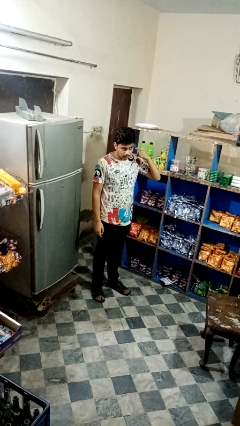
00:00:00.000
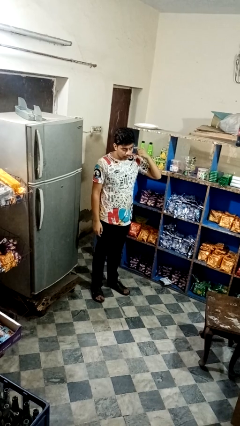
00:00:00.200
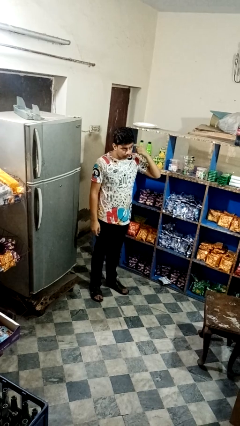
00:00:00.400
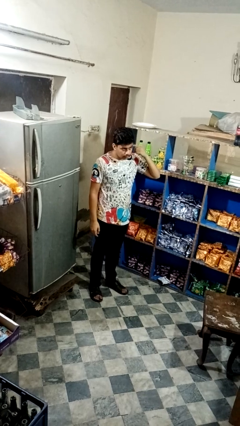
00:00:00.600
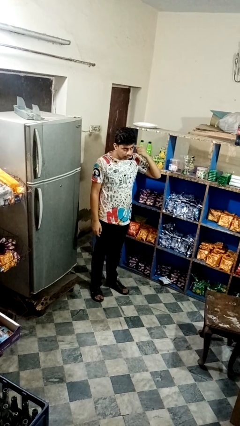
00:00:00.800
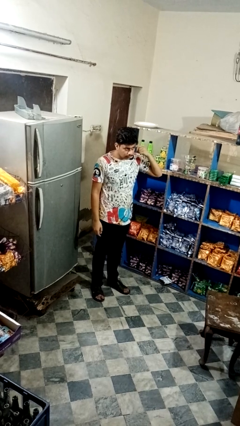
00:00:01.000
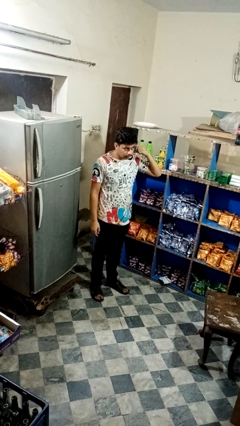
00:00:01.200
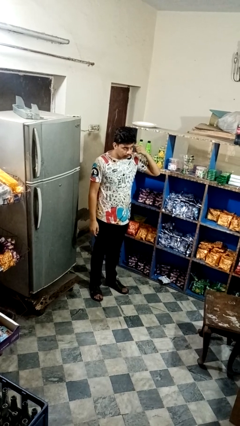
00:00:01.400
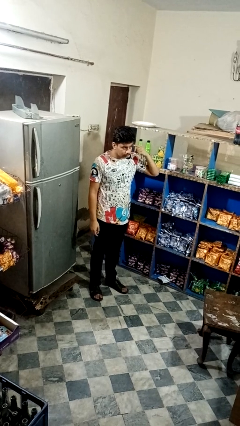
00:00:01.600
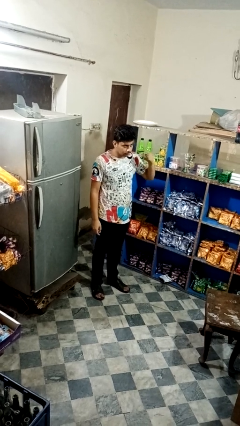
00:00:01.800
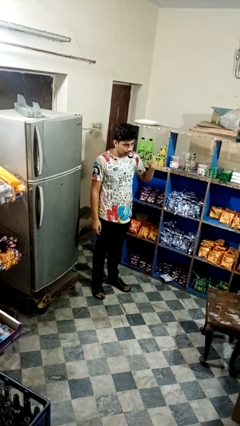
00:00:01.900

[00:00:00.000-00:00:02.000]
person gestures listen closely

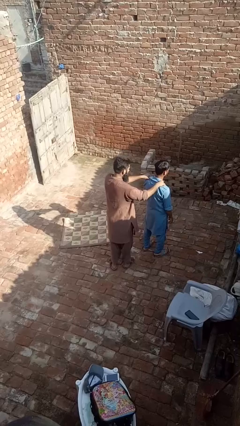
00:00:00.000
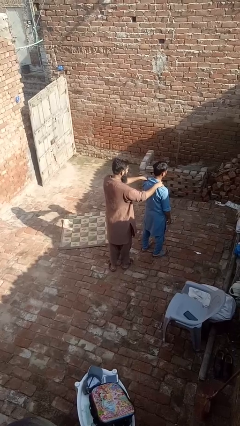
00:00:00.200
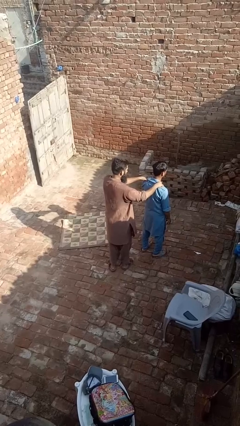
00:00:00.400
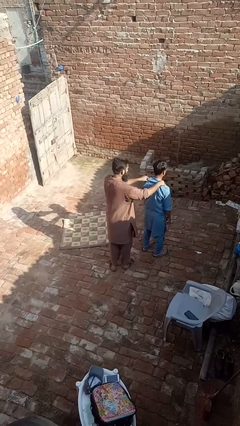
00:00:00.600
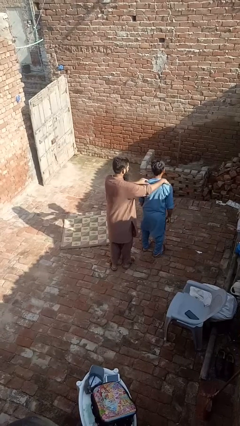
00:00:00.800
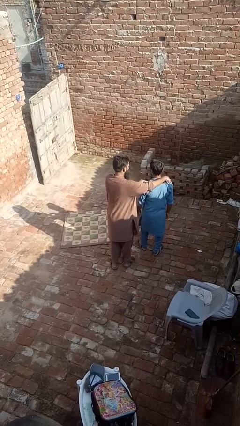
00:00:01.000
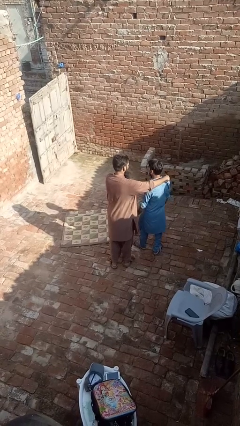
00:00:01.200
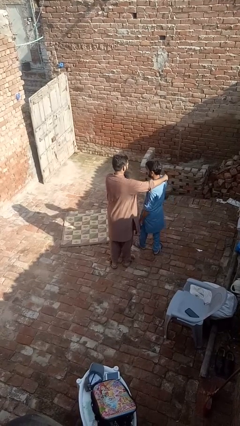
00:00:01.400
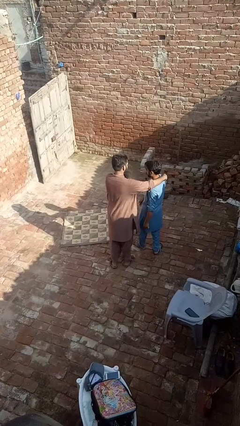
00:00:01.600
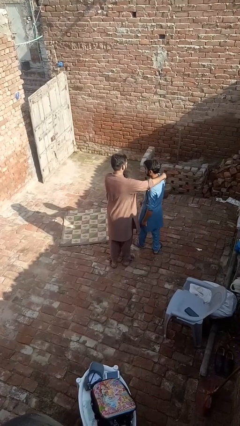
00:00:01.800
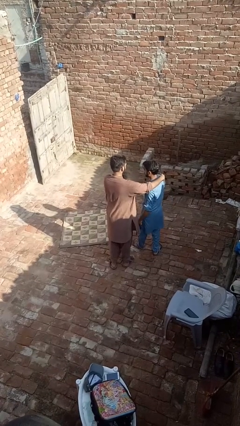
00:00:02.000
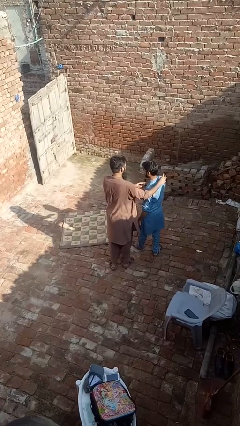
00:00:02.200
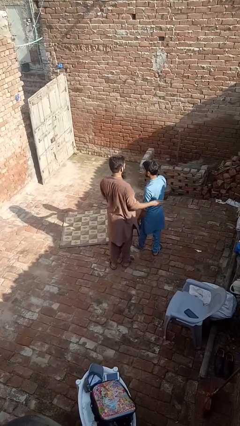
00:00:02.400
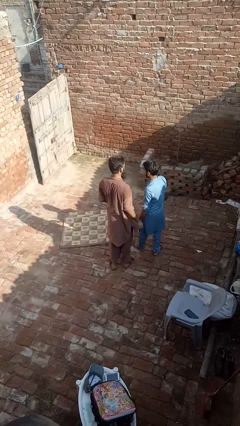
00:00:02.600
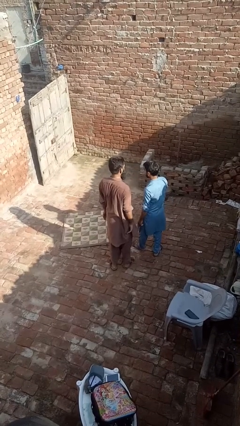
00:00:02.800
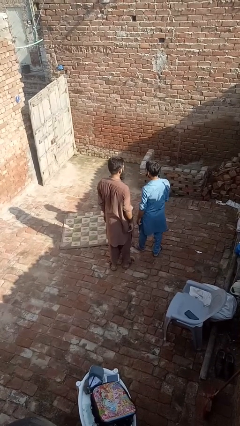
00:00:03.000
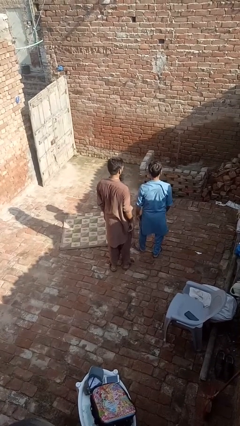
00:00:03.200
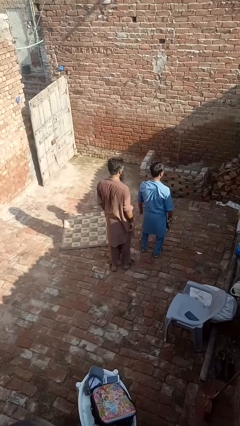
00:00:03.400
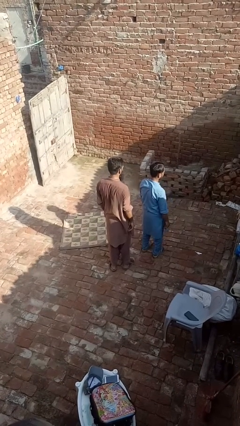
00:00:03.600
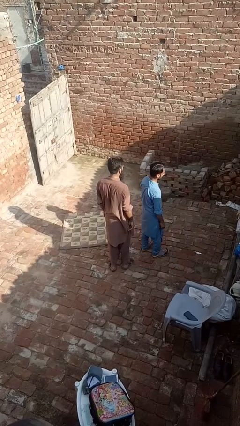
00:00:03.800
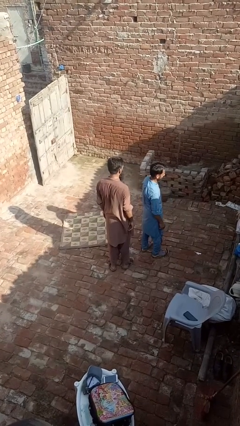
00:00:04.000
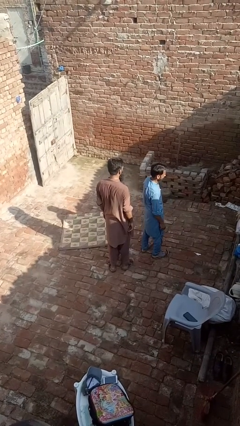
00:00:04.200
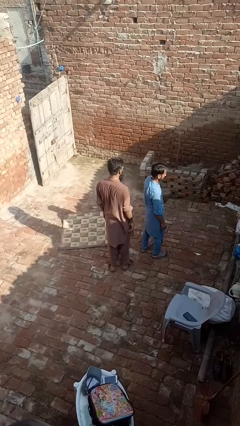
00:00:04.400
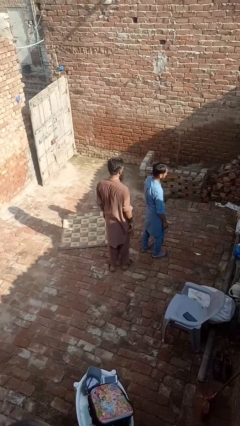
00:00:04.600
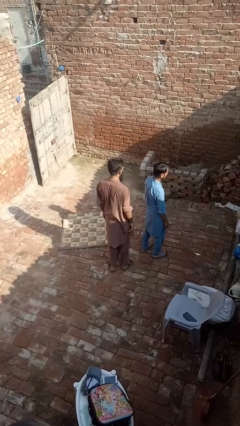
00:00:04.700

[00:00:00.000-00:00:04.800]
person spins person around

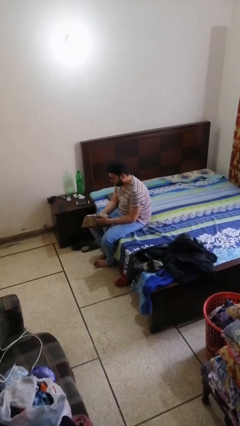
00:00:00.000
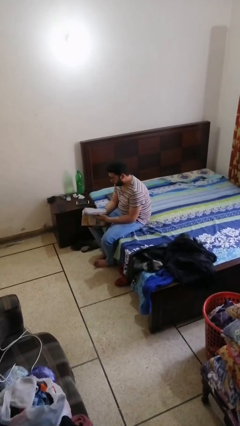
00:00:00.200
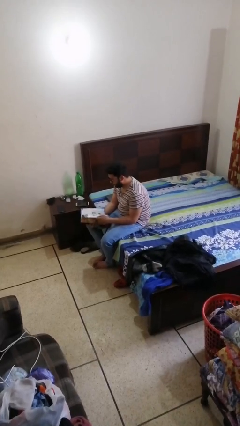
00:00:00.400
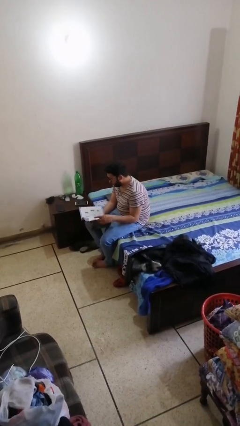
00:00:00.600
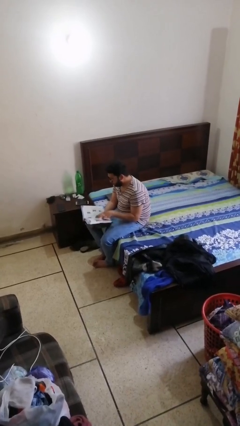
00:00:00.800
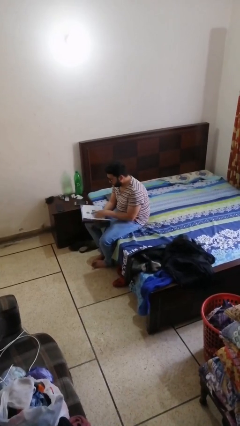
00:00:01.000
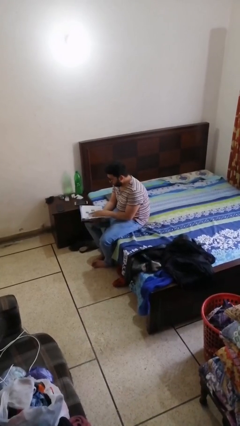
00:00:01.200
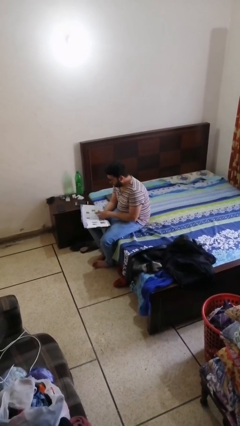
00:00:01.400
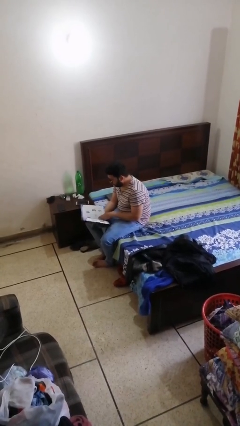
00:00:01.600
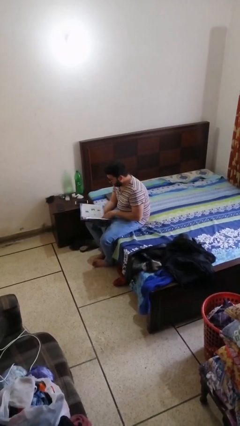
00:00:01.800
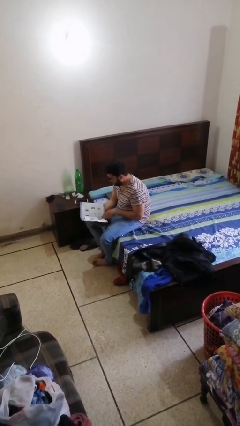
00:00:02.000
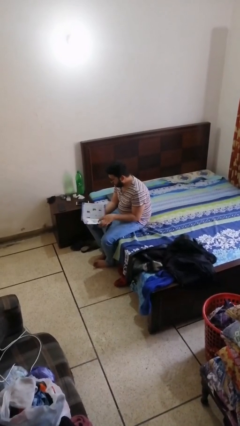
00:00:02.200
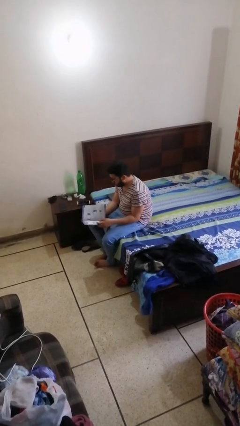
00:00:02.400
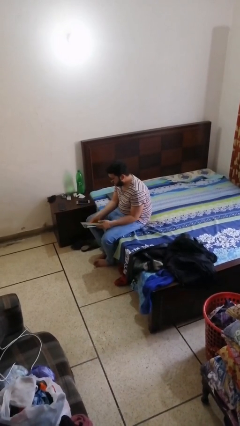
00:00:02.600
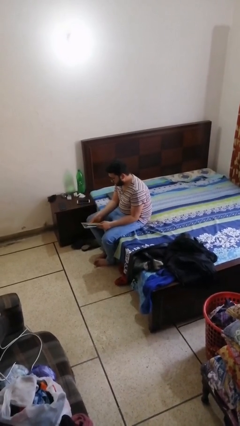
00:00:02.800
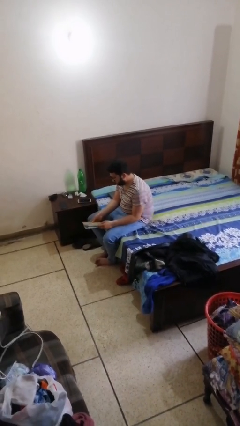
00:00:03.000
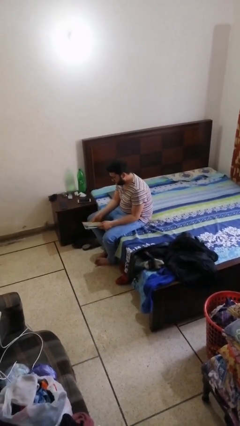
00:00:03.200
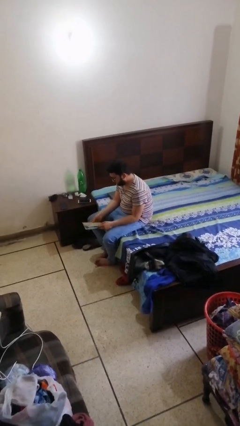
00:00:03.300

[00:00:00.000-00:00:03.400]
person reads document

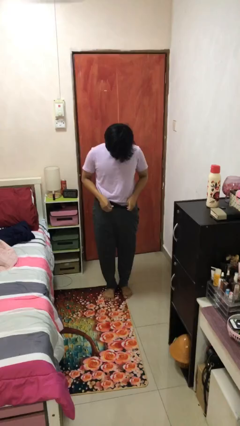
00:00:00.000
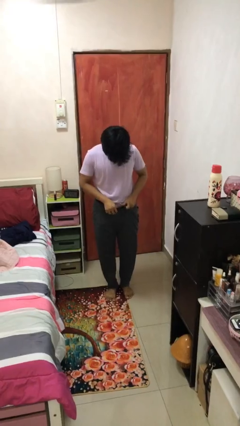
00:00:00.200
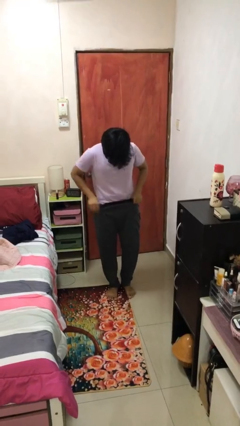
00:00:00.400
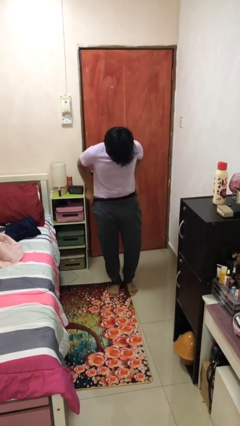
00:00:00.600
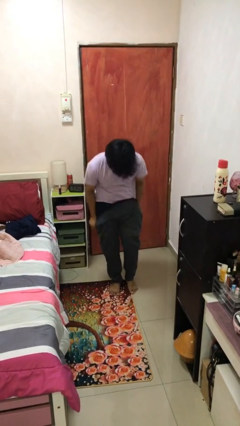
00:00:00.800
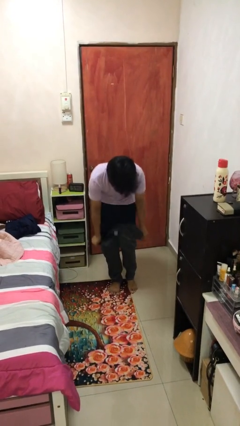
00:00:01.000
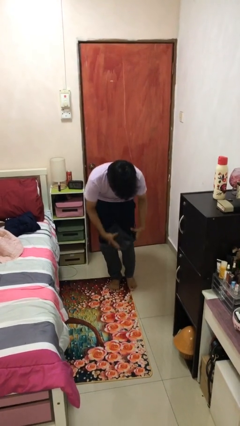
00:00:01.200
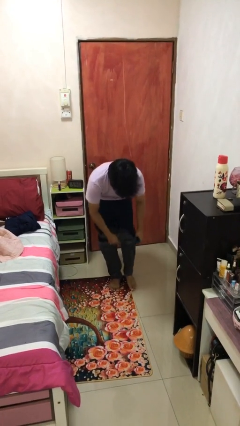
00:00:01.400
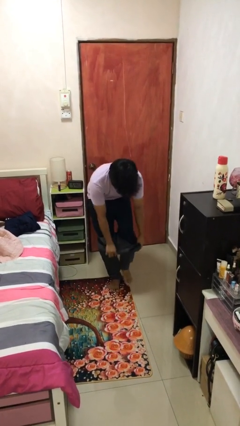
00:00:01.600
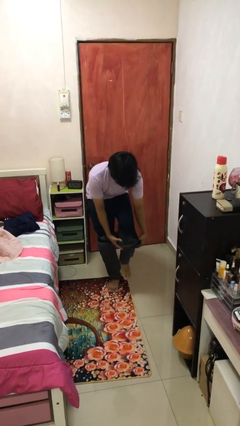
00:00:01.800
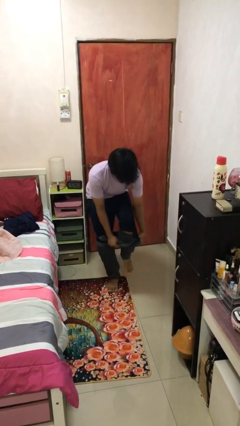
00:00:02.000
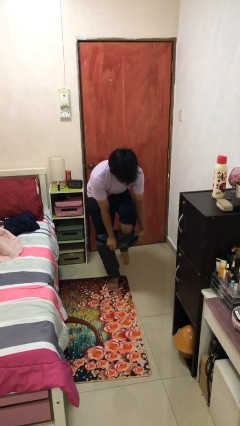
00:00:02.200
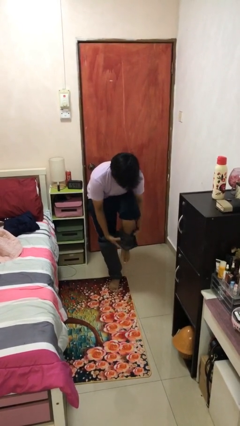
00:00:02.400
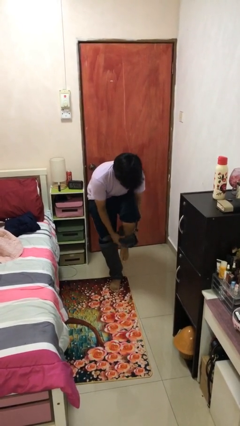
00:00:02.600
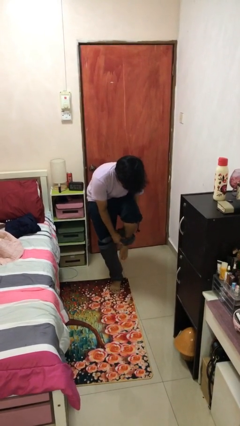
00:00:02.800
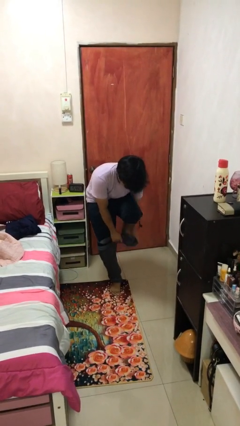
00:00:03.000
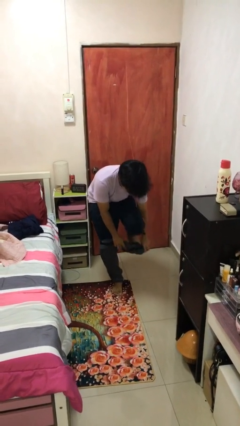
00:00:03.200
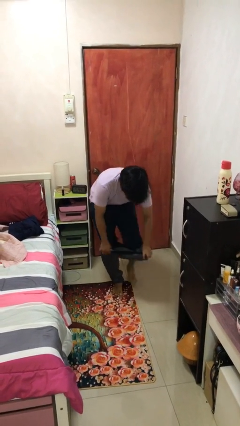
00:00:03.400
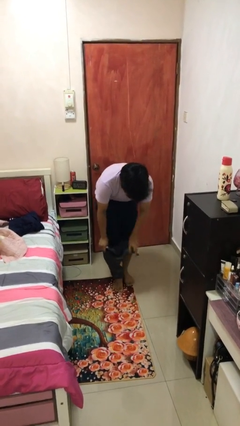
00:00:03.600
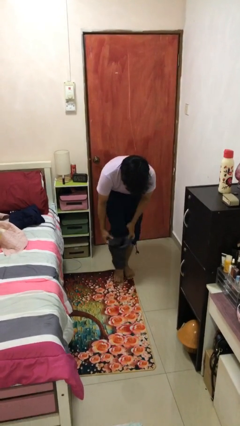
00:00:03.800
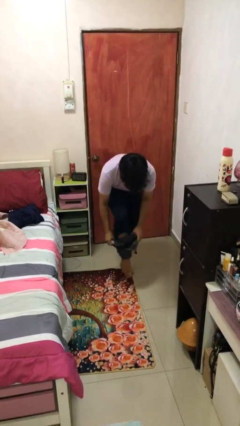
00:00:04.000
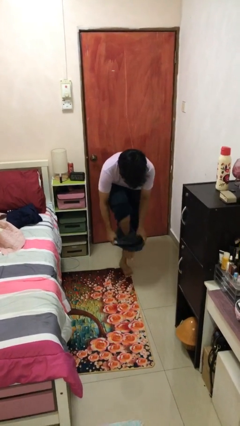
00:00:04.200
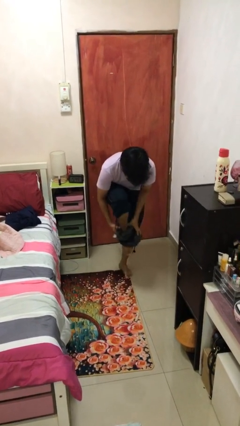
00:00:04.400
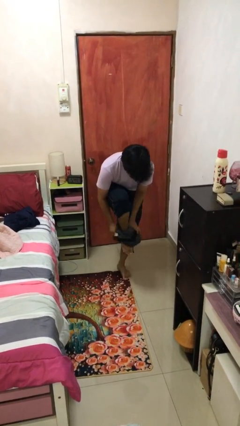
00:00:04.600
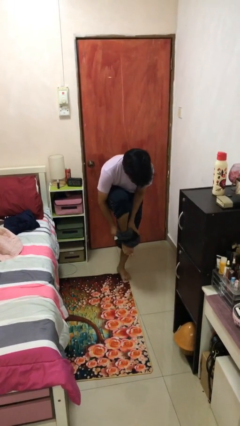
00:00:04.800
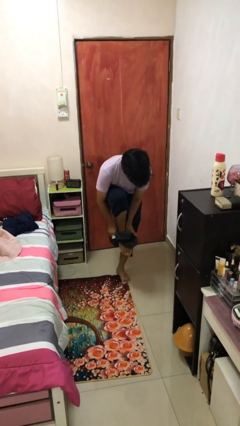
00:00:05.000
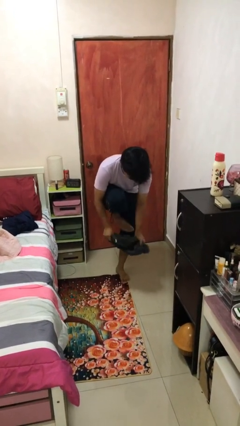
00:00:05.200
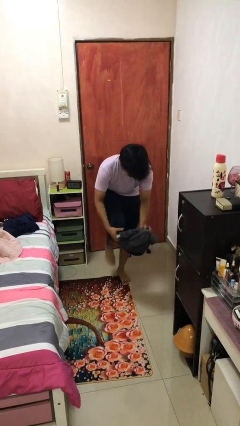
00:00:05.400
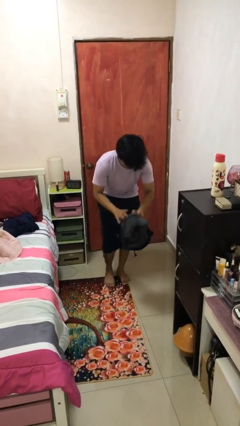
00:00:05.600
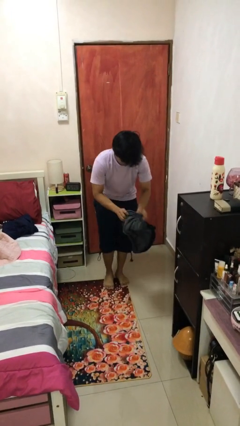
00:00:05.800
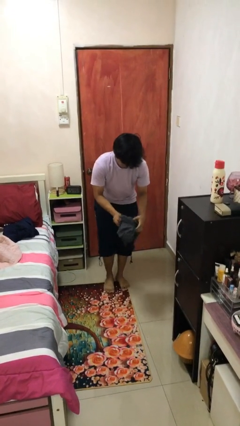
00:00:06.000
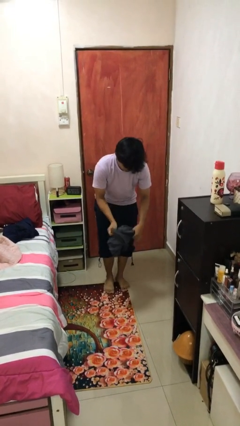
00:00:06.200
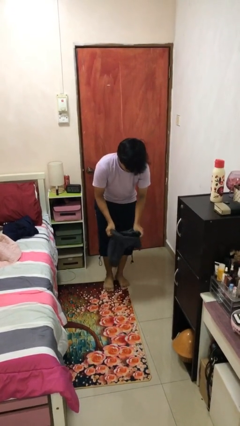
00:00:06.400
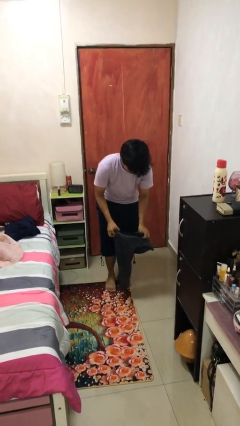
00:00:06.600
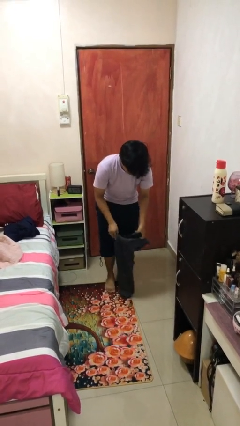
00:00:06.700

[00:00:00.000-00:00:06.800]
person takes off pants

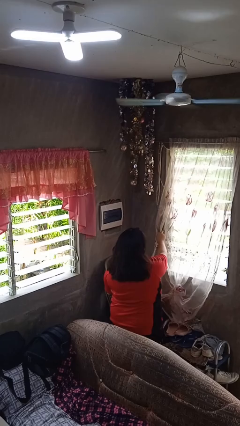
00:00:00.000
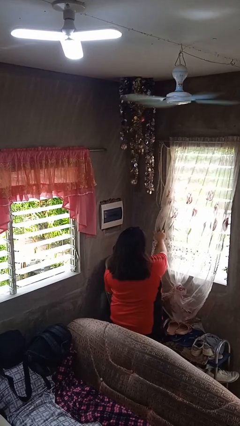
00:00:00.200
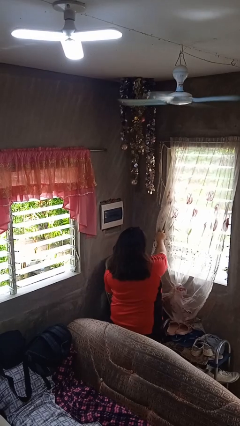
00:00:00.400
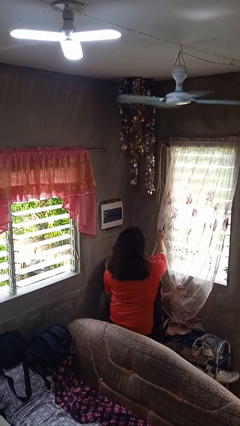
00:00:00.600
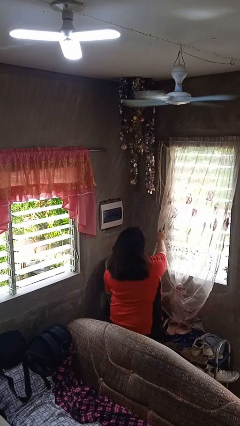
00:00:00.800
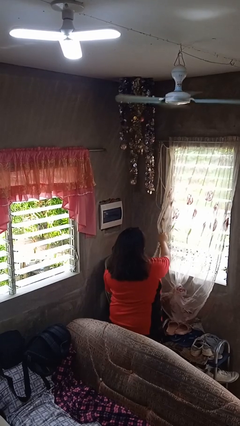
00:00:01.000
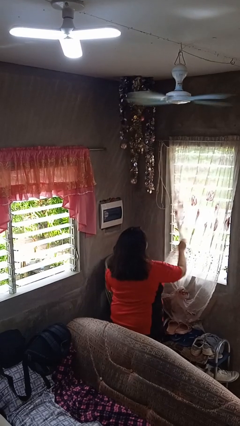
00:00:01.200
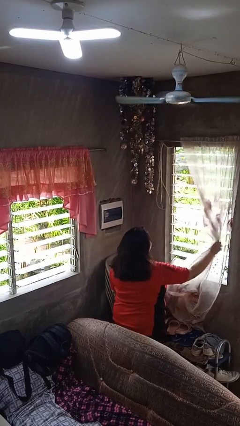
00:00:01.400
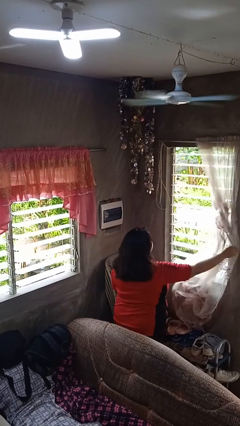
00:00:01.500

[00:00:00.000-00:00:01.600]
person opens curtains
